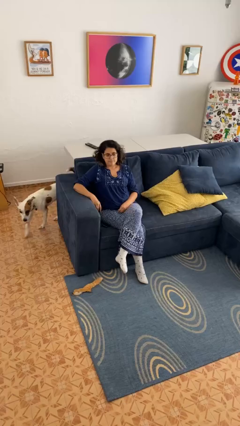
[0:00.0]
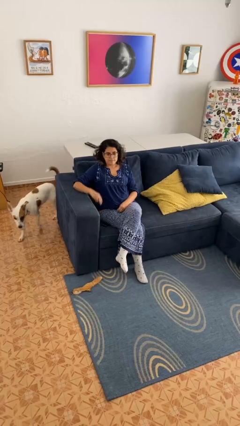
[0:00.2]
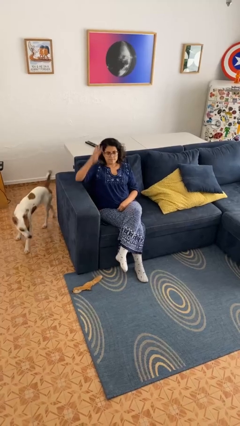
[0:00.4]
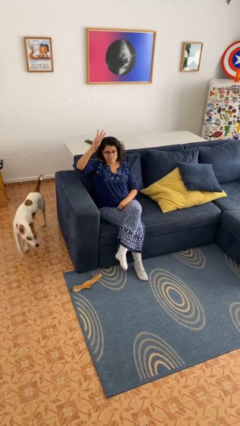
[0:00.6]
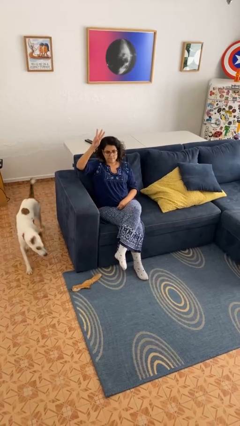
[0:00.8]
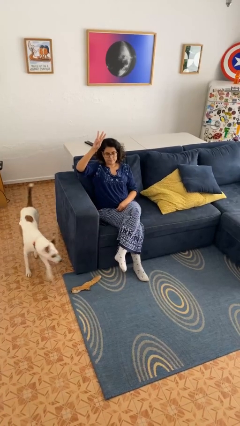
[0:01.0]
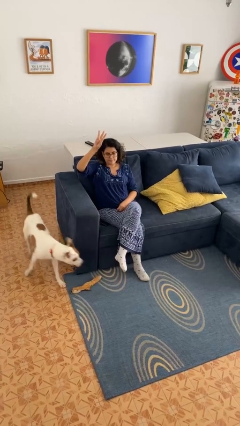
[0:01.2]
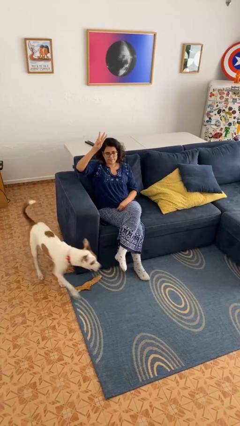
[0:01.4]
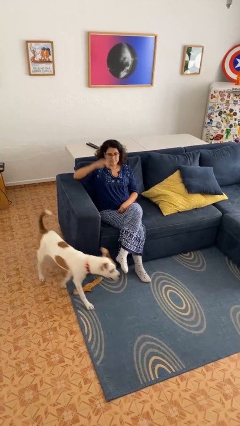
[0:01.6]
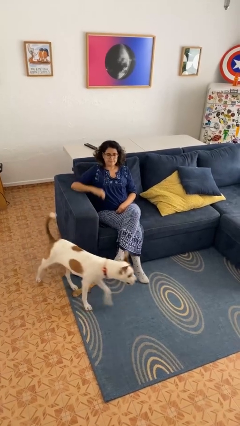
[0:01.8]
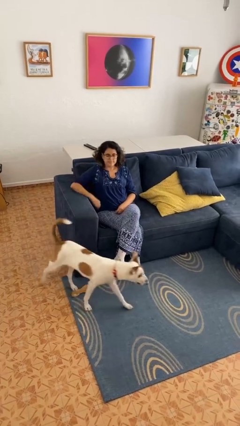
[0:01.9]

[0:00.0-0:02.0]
person gestures number three

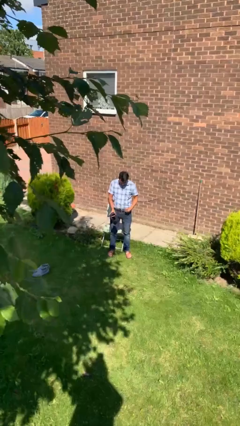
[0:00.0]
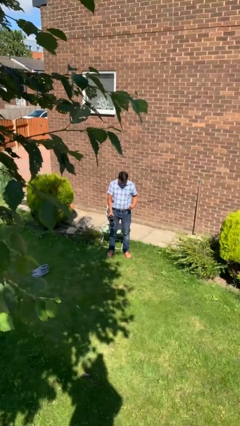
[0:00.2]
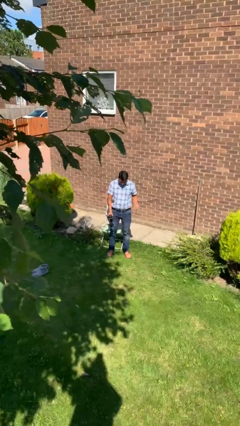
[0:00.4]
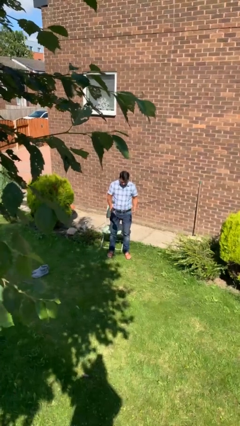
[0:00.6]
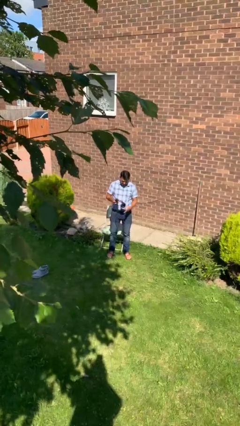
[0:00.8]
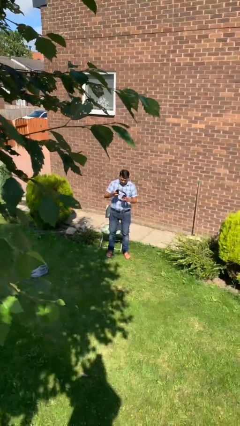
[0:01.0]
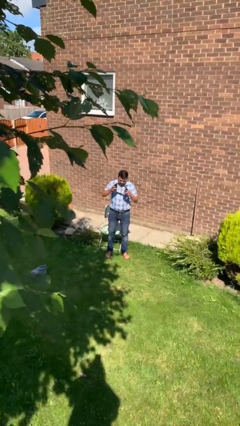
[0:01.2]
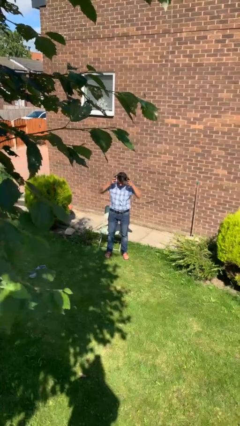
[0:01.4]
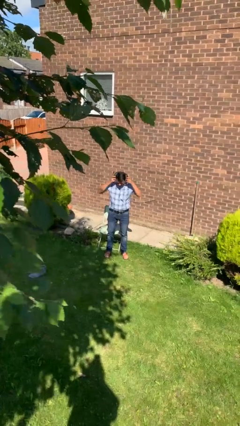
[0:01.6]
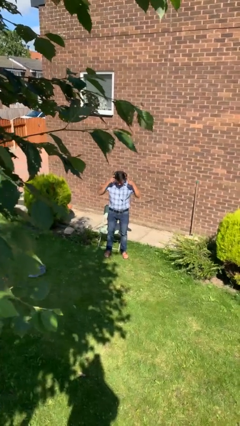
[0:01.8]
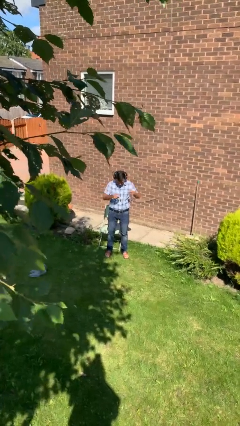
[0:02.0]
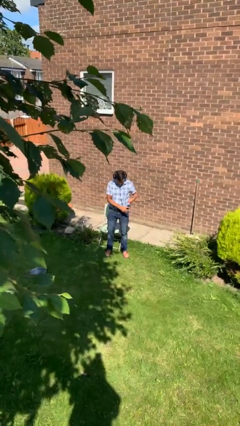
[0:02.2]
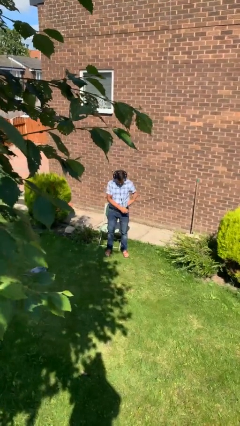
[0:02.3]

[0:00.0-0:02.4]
person puts on headphones

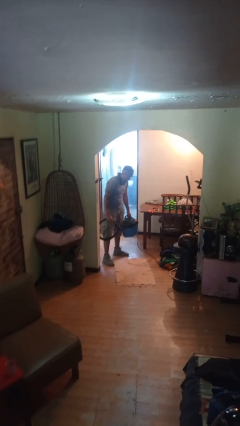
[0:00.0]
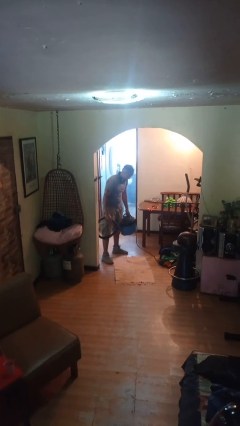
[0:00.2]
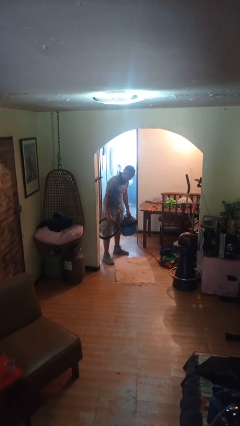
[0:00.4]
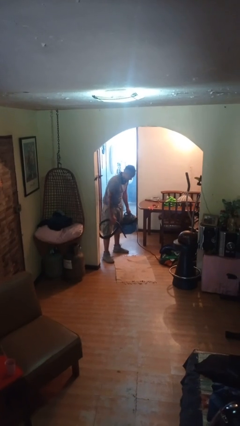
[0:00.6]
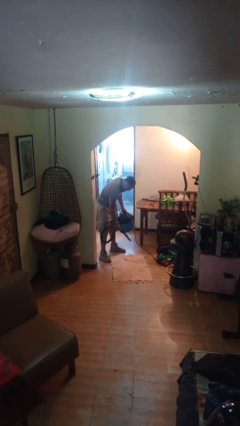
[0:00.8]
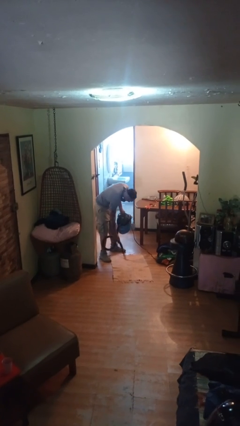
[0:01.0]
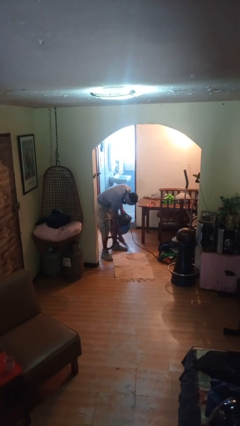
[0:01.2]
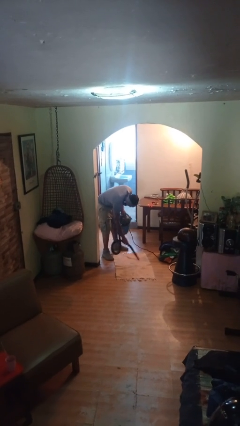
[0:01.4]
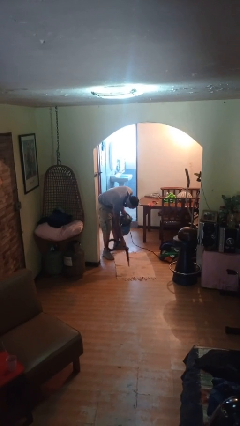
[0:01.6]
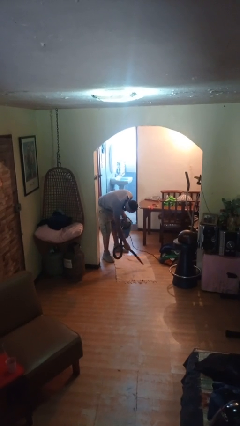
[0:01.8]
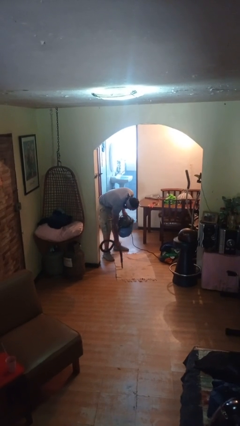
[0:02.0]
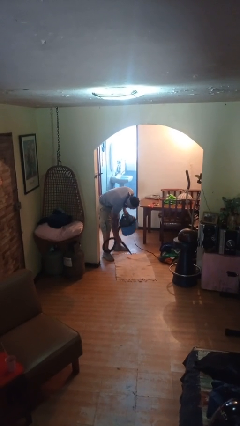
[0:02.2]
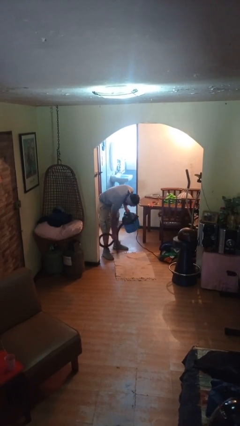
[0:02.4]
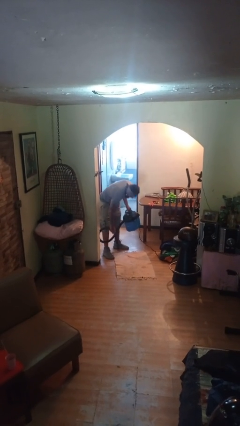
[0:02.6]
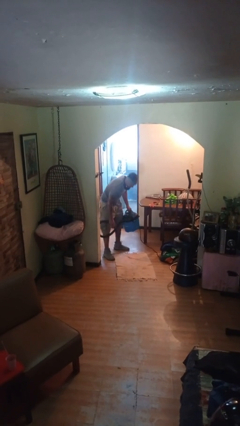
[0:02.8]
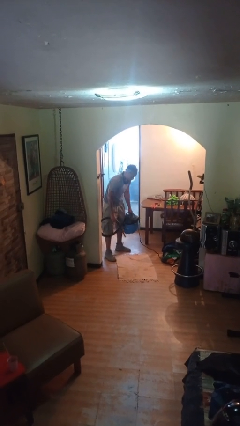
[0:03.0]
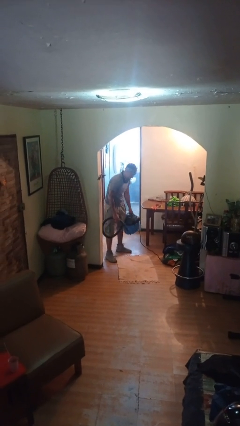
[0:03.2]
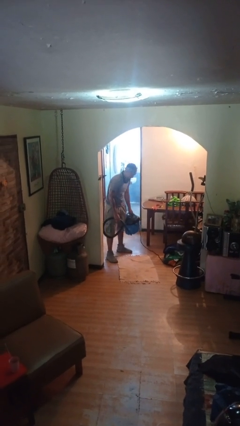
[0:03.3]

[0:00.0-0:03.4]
person vacuums carpet

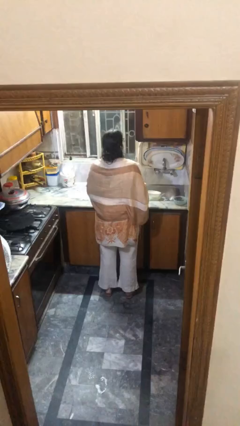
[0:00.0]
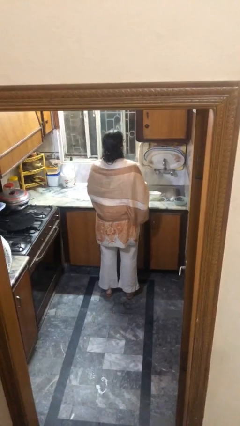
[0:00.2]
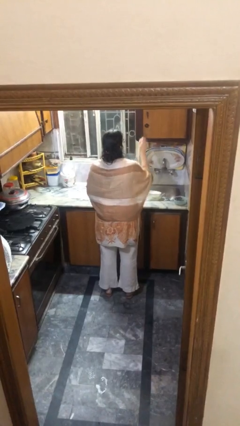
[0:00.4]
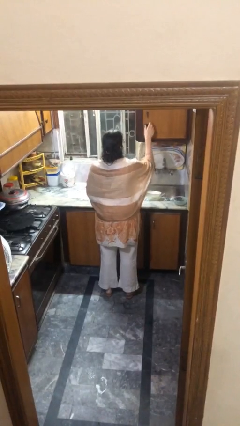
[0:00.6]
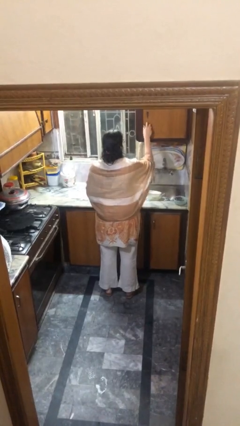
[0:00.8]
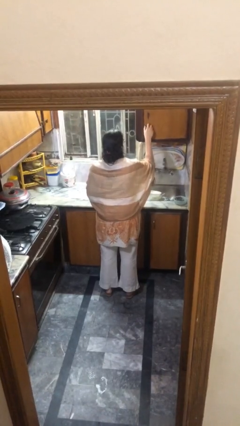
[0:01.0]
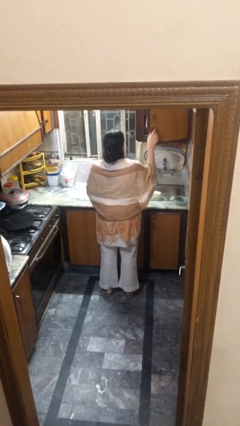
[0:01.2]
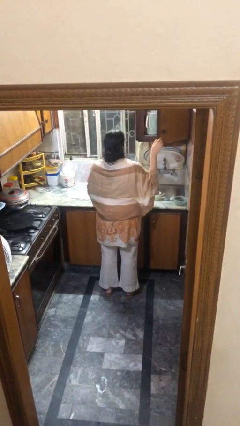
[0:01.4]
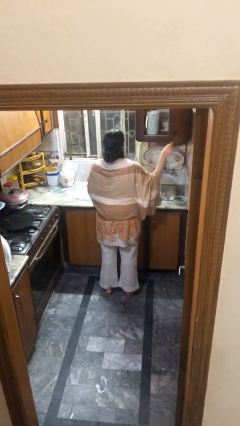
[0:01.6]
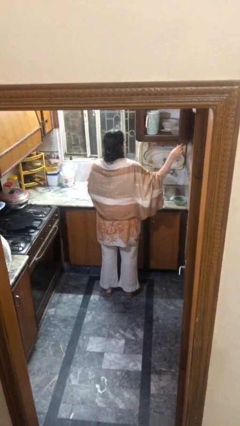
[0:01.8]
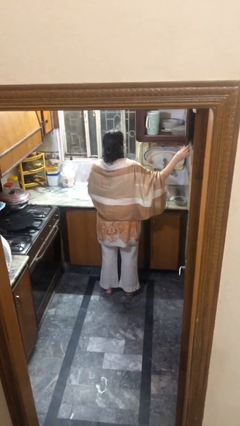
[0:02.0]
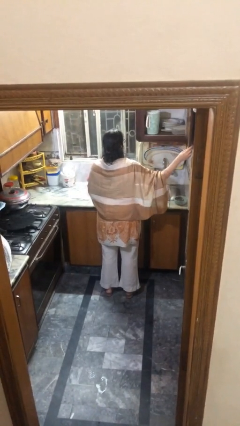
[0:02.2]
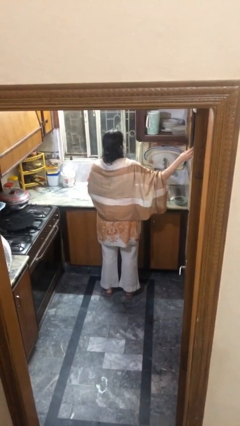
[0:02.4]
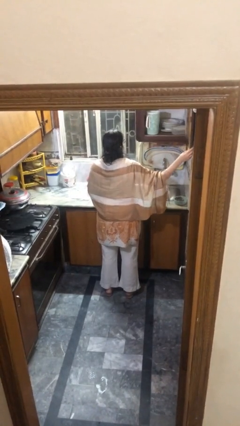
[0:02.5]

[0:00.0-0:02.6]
person opens kitchen drawer

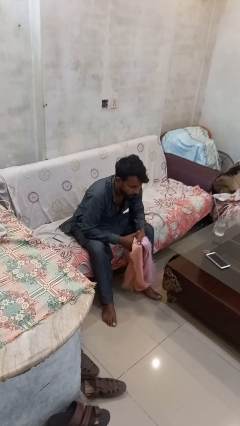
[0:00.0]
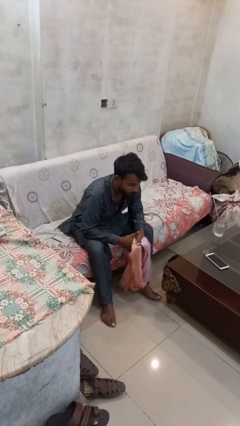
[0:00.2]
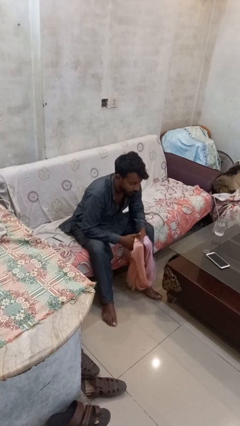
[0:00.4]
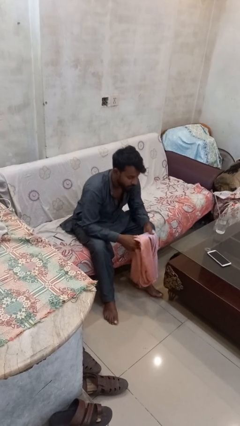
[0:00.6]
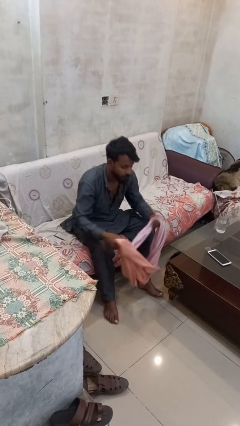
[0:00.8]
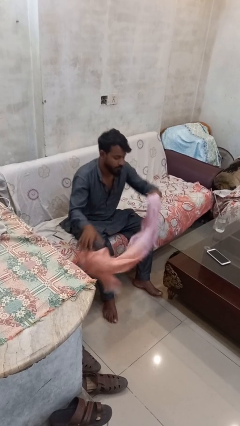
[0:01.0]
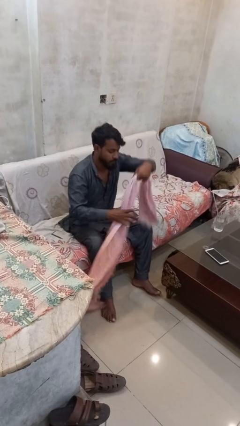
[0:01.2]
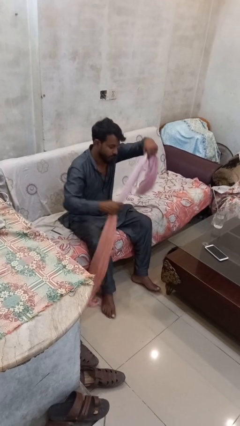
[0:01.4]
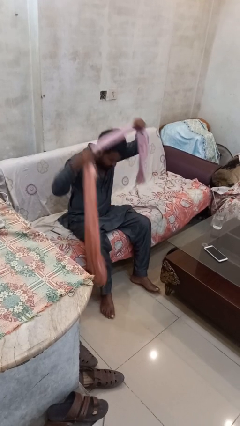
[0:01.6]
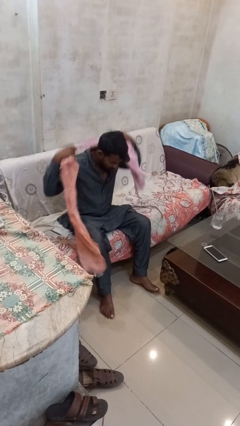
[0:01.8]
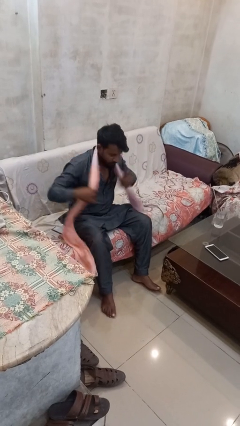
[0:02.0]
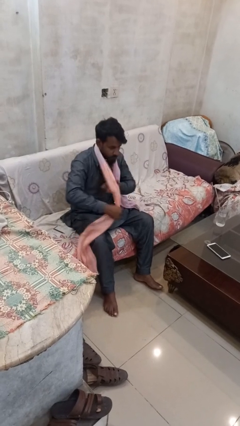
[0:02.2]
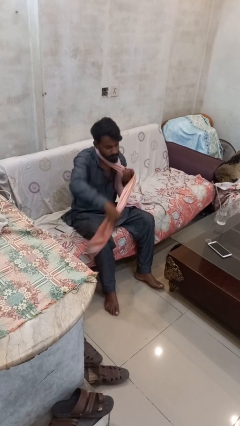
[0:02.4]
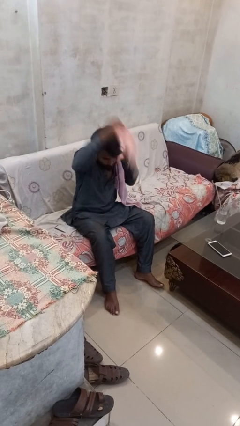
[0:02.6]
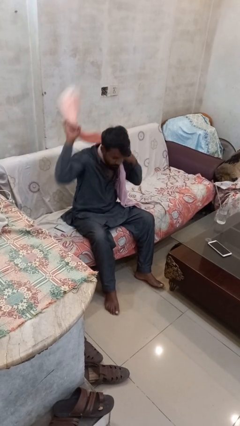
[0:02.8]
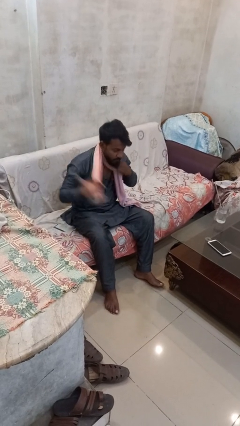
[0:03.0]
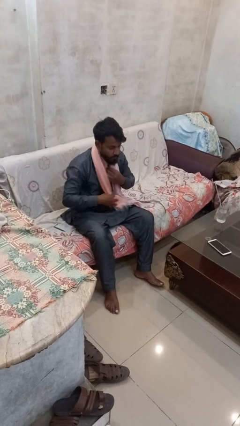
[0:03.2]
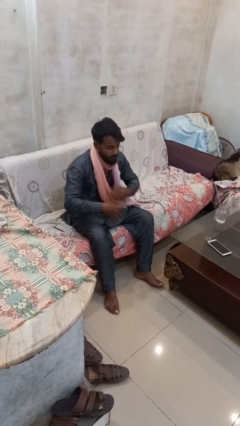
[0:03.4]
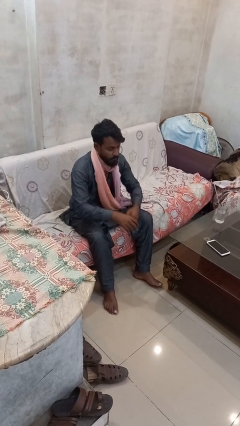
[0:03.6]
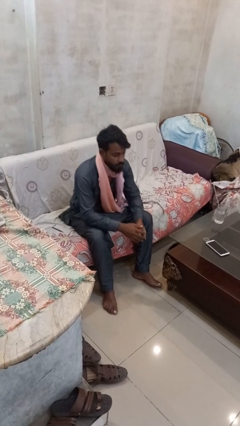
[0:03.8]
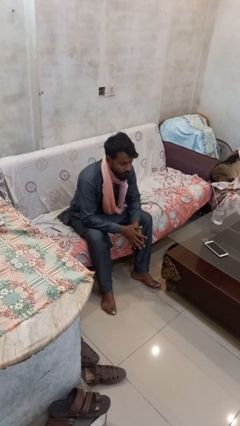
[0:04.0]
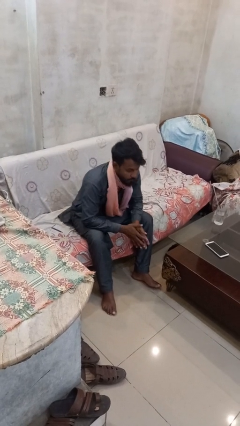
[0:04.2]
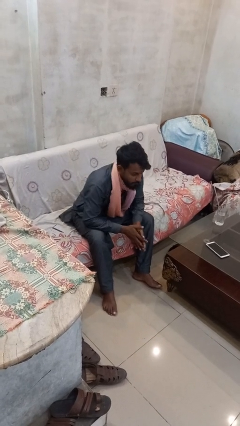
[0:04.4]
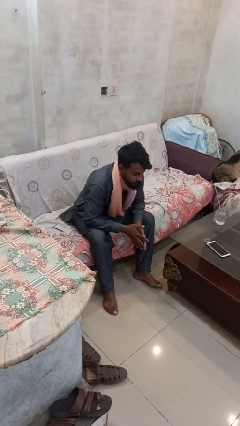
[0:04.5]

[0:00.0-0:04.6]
person puts on scarf

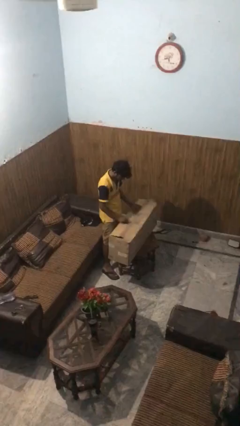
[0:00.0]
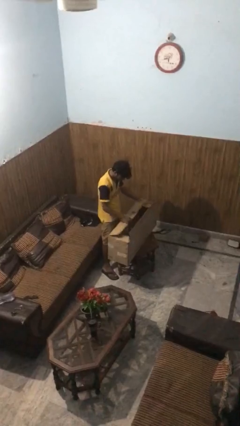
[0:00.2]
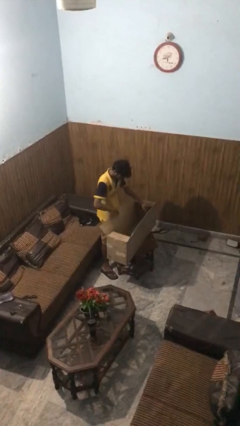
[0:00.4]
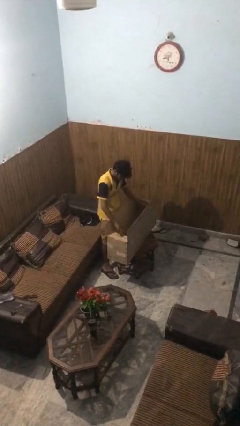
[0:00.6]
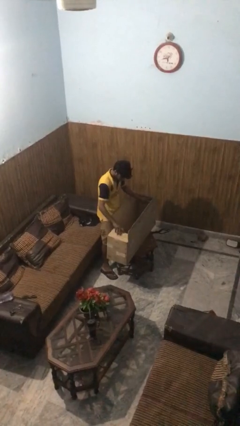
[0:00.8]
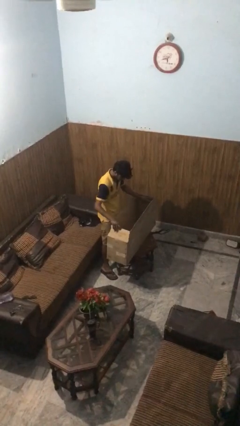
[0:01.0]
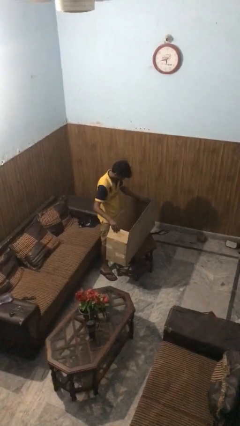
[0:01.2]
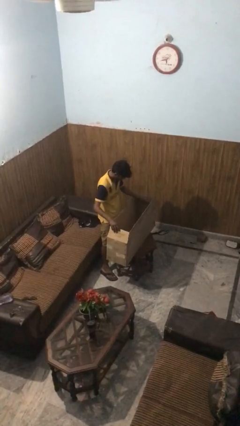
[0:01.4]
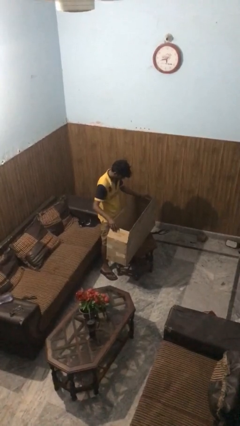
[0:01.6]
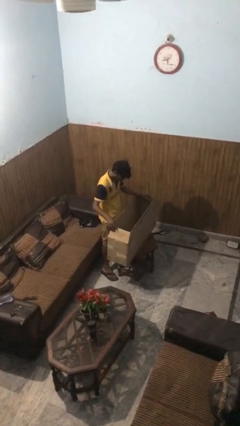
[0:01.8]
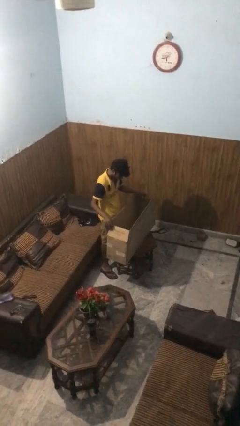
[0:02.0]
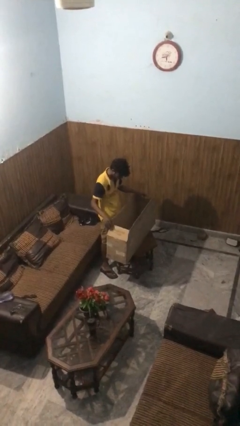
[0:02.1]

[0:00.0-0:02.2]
person opens box

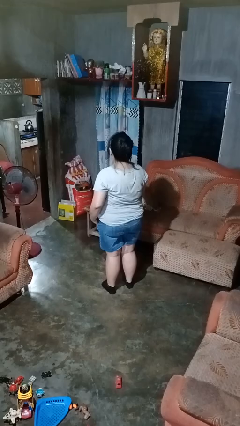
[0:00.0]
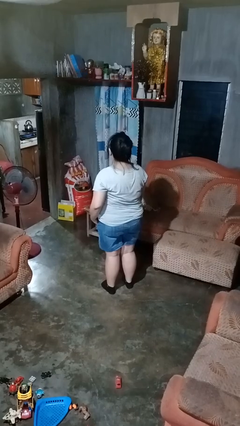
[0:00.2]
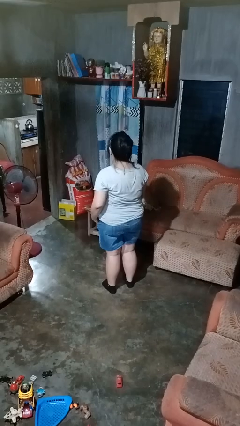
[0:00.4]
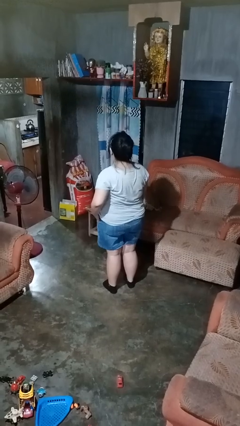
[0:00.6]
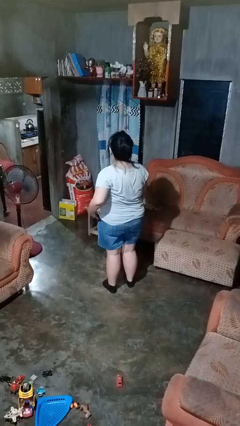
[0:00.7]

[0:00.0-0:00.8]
person puts hands in back pockets
